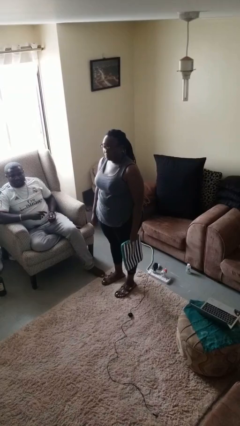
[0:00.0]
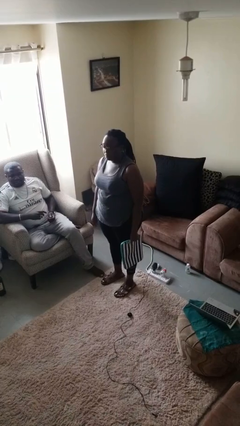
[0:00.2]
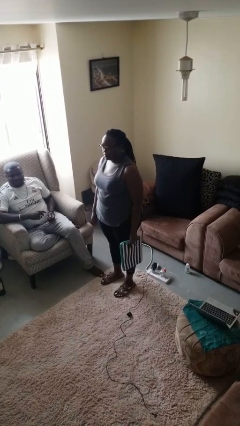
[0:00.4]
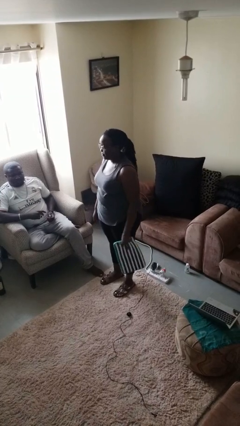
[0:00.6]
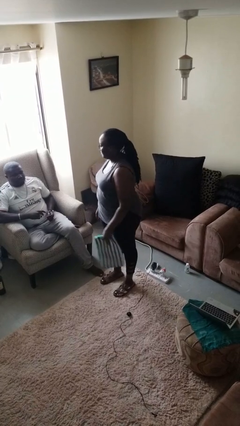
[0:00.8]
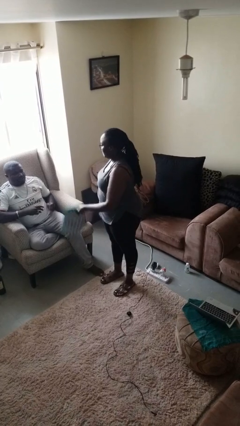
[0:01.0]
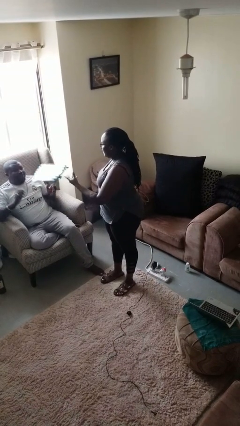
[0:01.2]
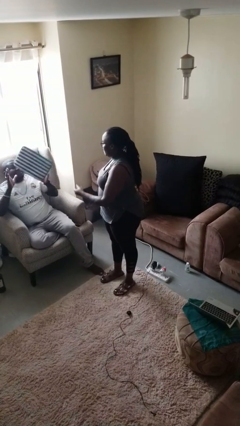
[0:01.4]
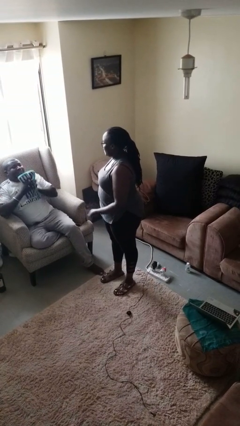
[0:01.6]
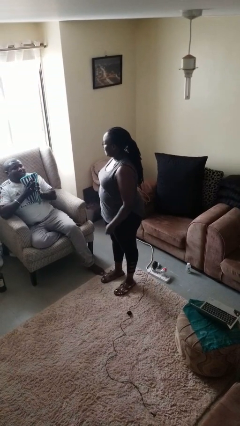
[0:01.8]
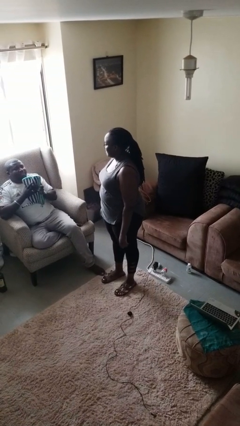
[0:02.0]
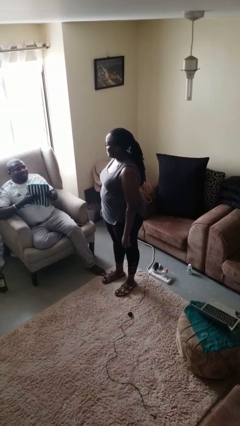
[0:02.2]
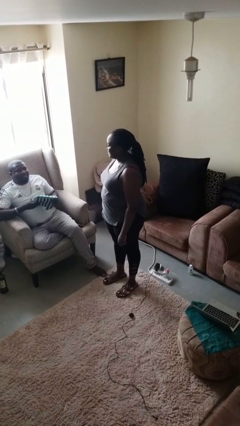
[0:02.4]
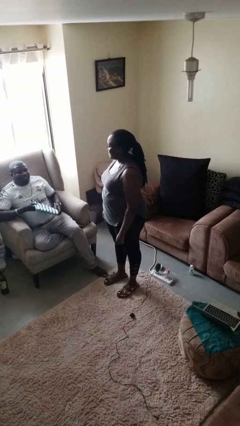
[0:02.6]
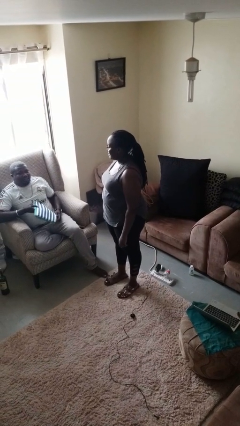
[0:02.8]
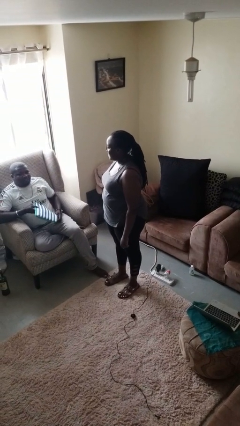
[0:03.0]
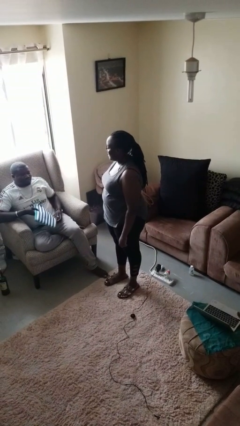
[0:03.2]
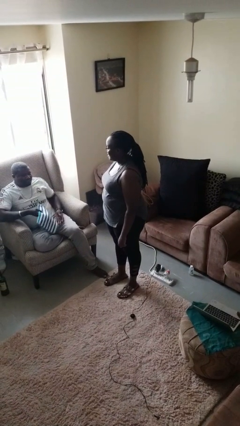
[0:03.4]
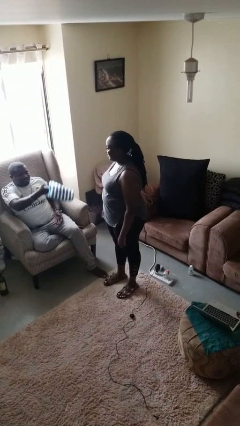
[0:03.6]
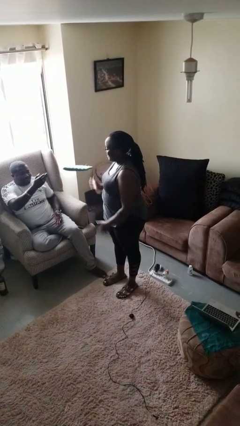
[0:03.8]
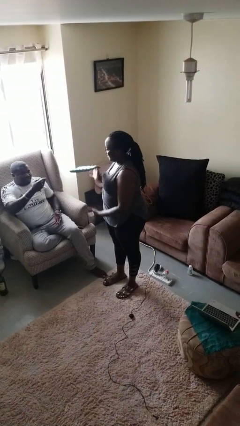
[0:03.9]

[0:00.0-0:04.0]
person throws object to person

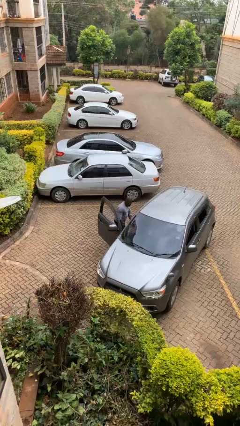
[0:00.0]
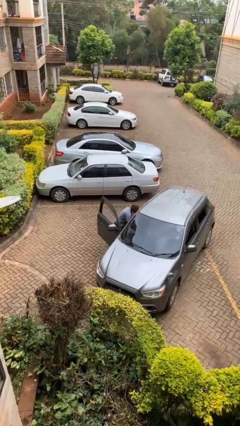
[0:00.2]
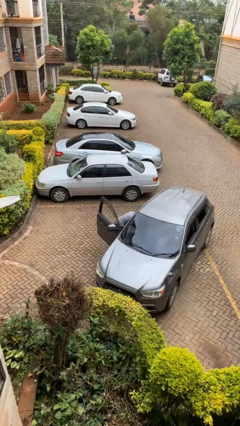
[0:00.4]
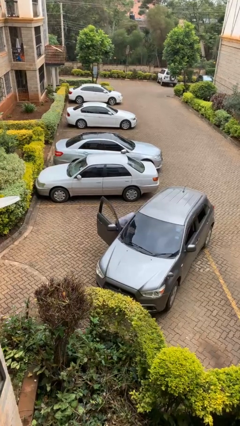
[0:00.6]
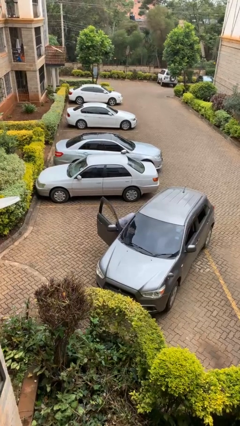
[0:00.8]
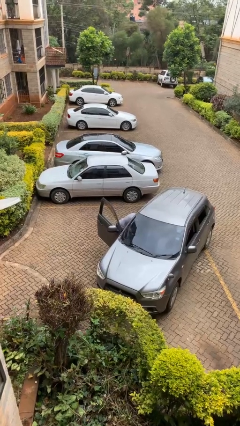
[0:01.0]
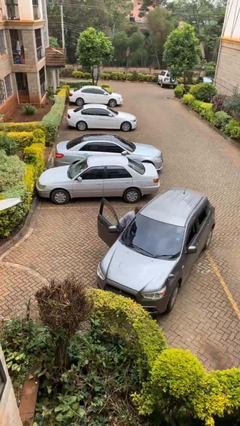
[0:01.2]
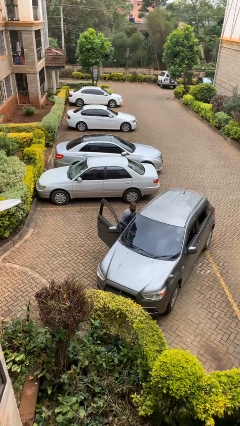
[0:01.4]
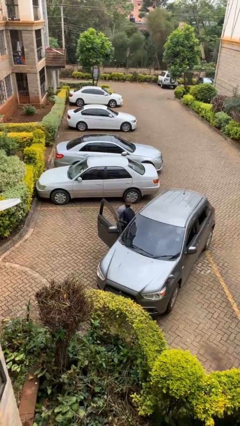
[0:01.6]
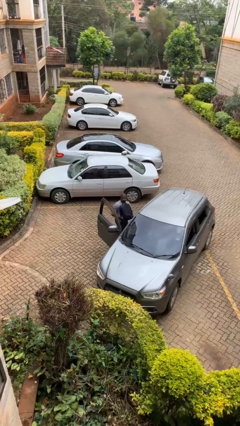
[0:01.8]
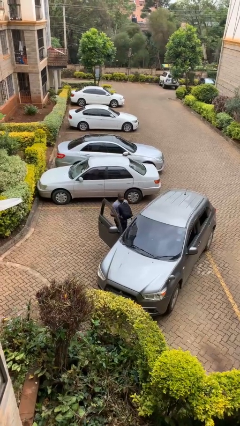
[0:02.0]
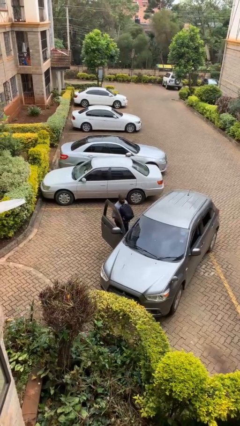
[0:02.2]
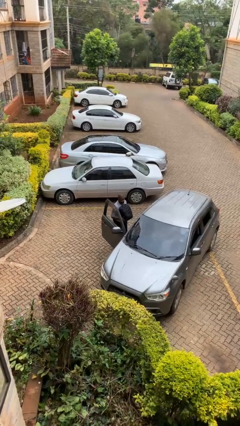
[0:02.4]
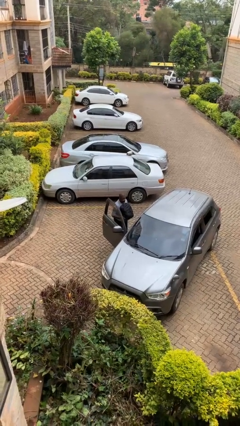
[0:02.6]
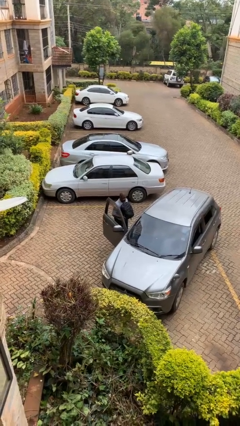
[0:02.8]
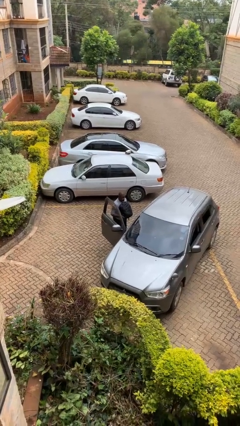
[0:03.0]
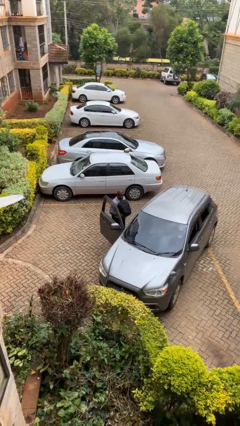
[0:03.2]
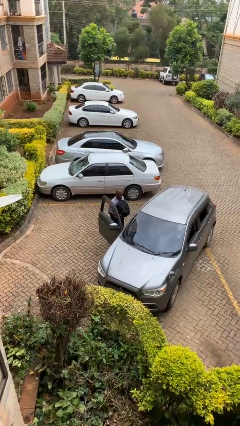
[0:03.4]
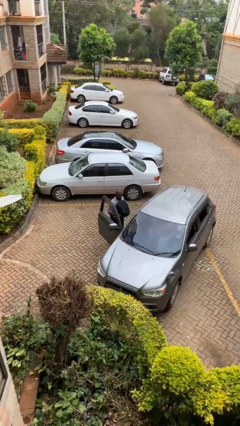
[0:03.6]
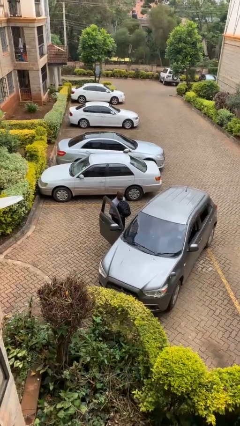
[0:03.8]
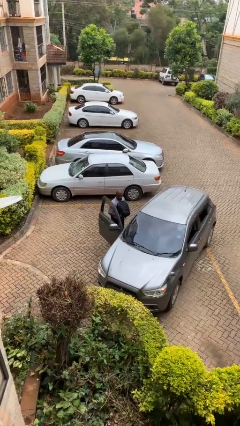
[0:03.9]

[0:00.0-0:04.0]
person unloads car

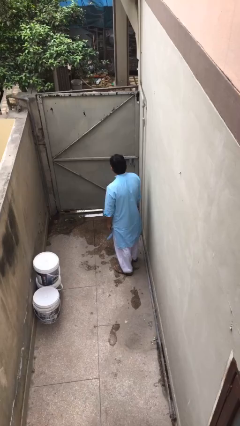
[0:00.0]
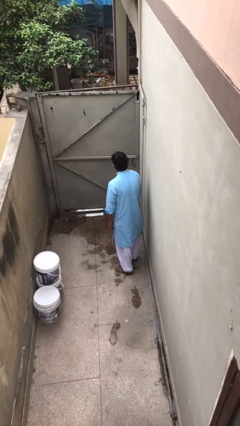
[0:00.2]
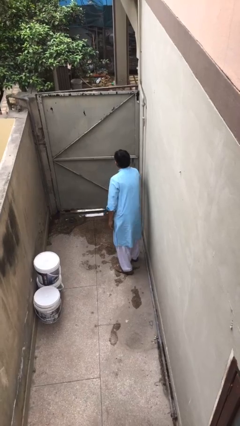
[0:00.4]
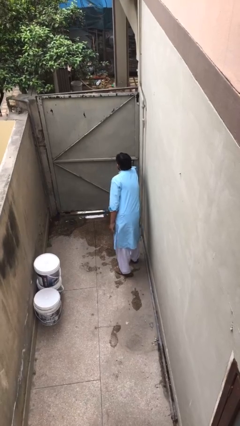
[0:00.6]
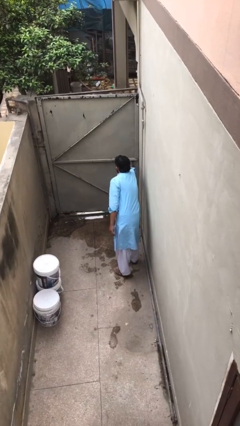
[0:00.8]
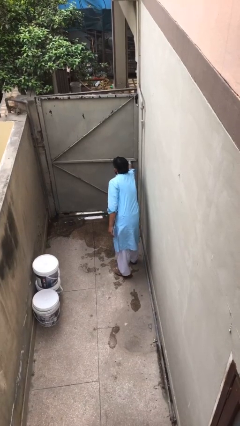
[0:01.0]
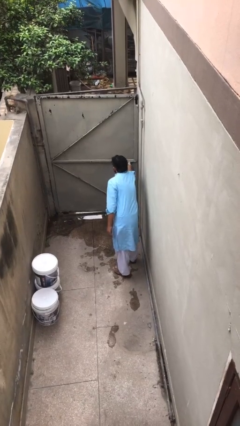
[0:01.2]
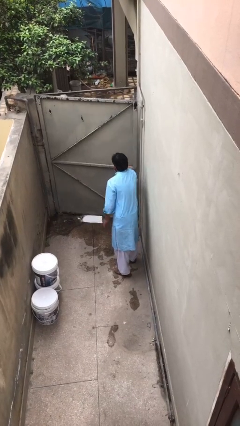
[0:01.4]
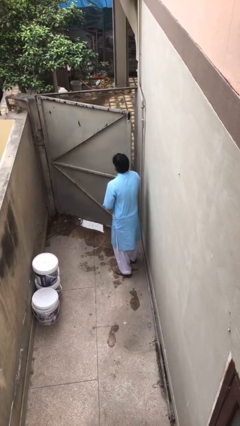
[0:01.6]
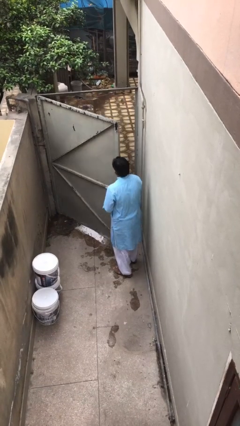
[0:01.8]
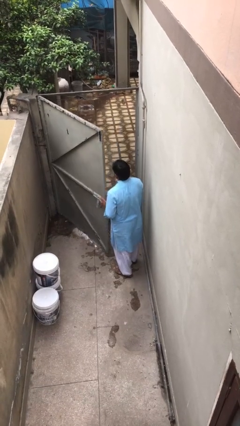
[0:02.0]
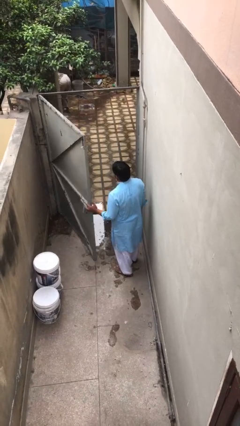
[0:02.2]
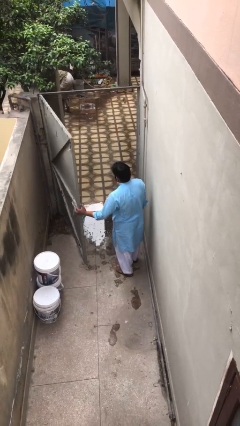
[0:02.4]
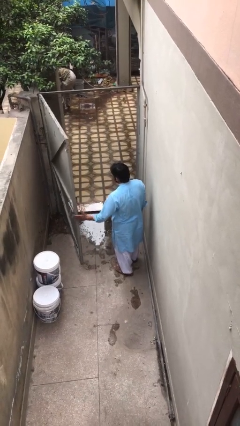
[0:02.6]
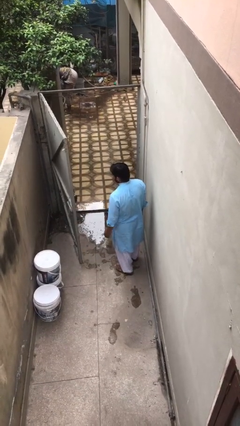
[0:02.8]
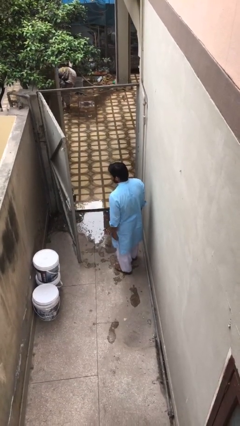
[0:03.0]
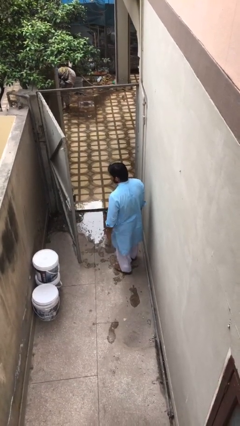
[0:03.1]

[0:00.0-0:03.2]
person opens facility door

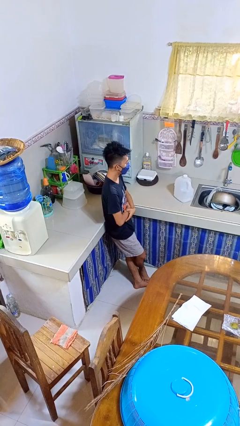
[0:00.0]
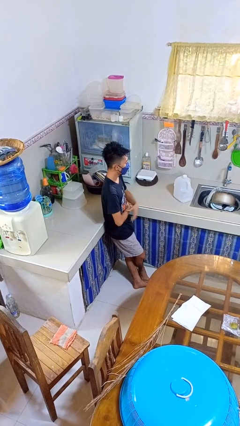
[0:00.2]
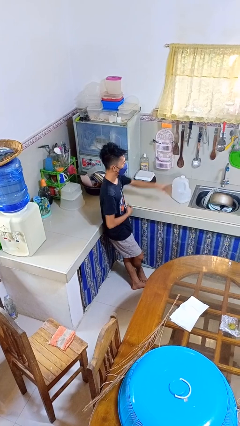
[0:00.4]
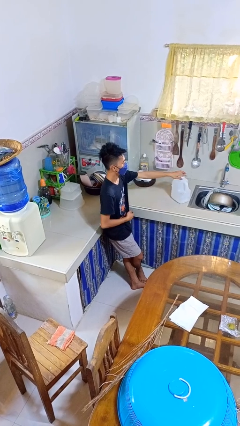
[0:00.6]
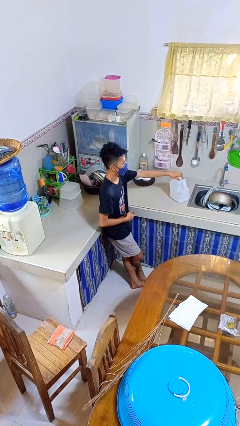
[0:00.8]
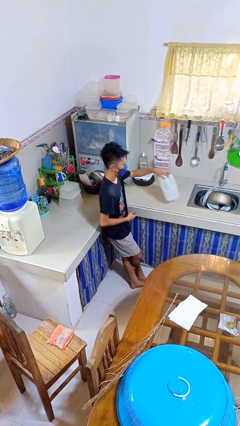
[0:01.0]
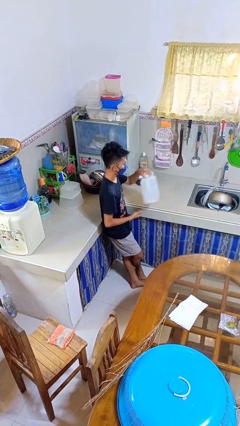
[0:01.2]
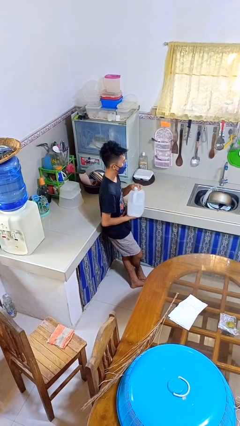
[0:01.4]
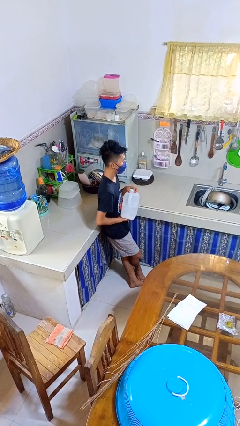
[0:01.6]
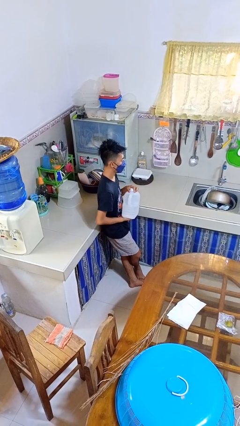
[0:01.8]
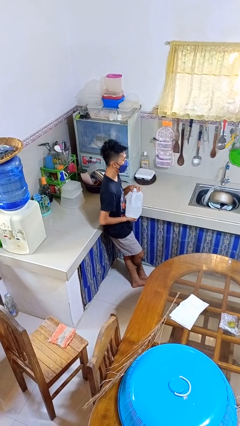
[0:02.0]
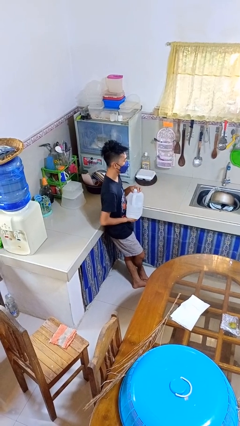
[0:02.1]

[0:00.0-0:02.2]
person picks up object from countertop

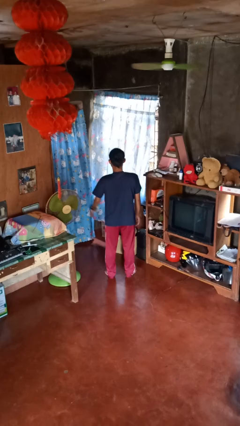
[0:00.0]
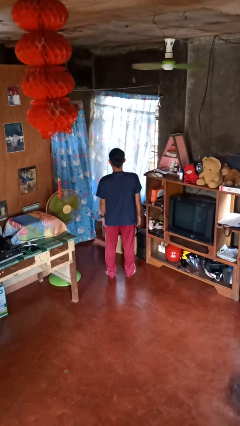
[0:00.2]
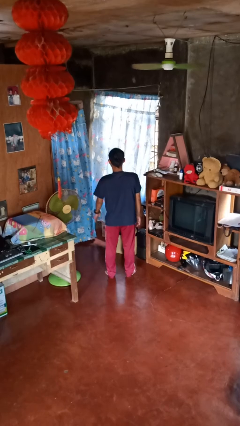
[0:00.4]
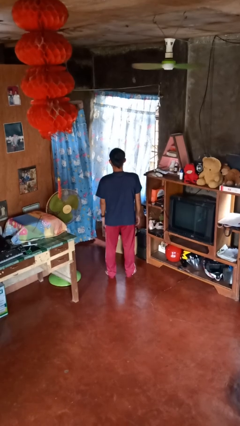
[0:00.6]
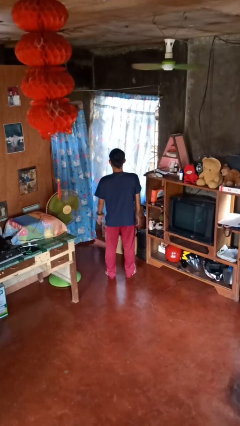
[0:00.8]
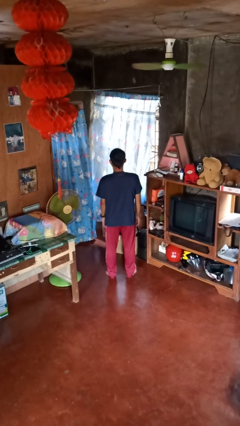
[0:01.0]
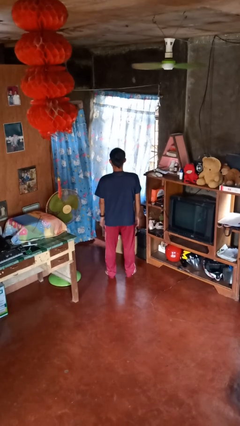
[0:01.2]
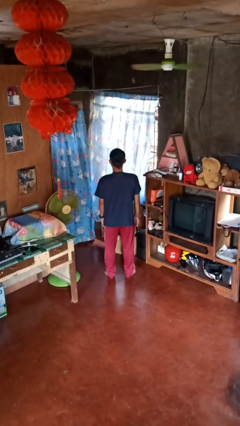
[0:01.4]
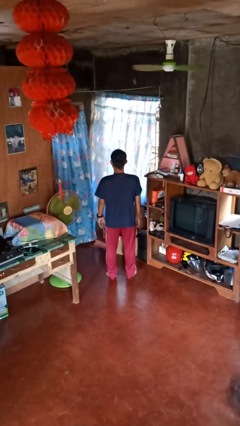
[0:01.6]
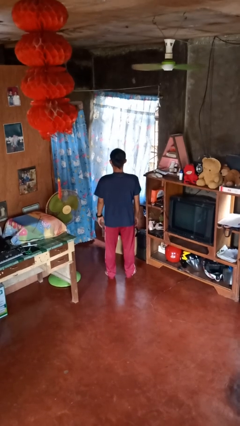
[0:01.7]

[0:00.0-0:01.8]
person slaps hands on thighs

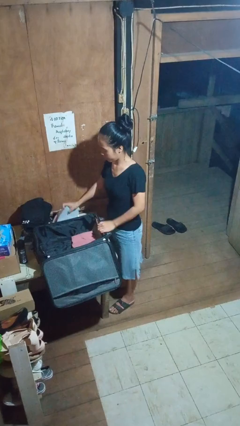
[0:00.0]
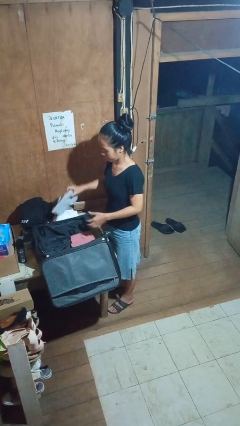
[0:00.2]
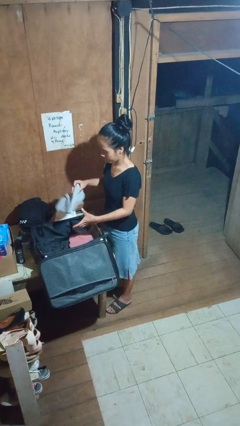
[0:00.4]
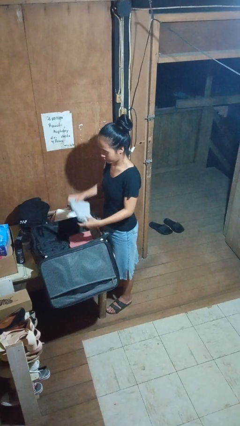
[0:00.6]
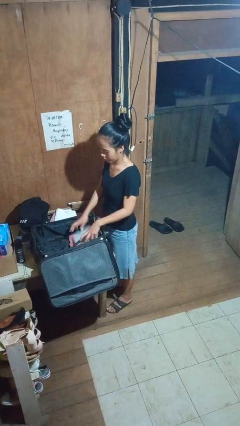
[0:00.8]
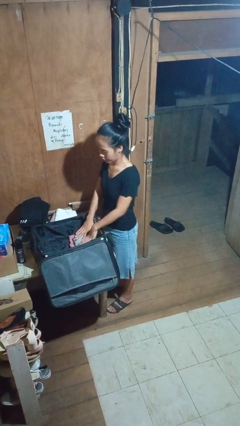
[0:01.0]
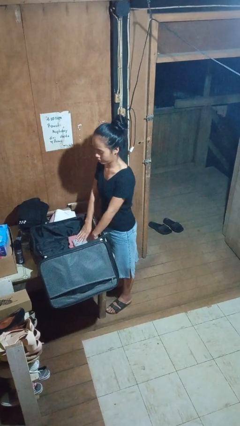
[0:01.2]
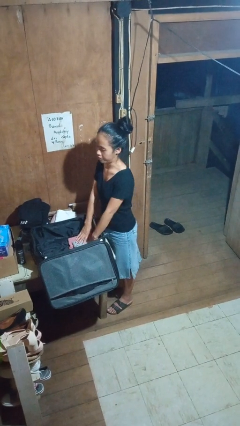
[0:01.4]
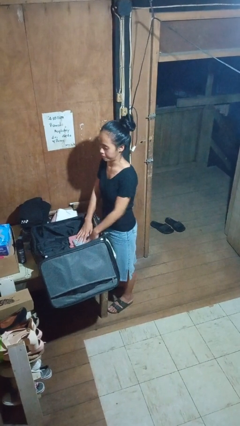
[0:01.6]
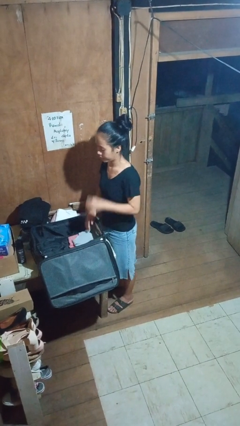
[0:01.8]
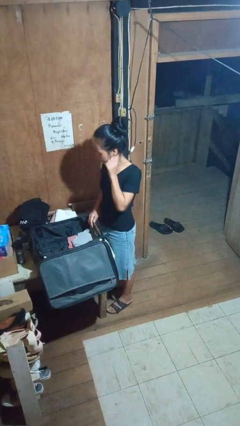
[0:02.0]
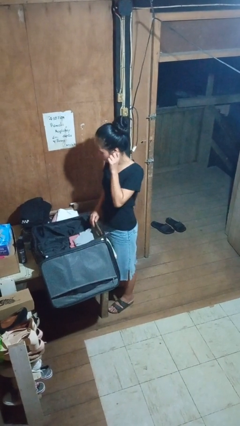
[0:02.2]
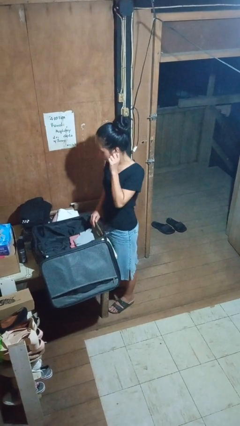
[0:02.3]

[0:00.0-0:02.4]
person loads clothes into suitcase
